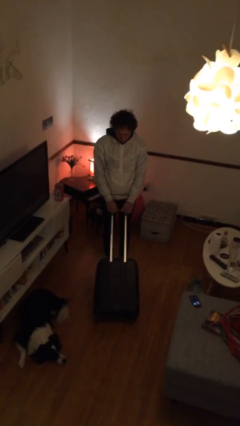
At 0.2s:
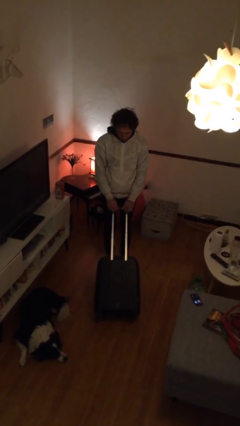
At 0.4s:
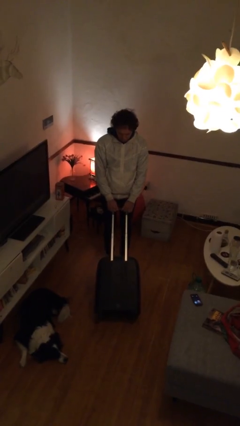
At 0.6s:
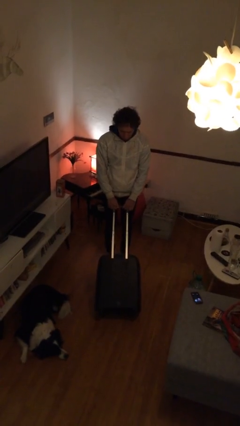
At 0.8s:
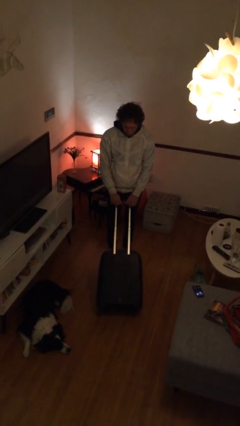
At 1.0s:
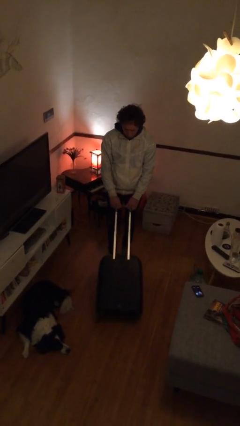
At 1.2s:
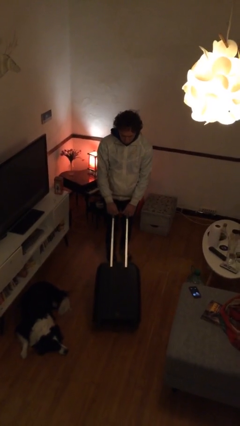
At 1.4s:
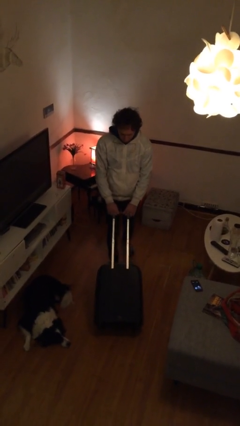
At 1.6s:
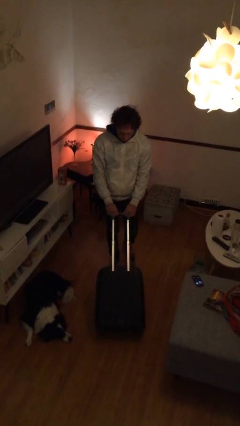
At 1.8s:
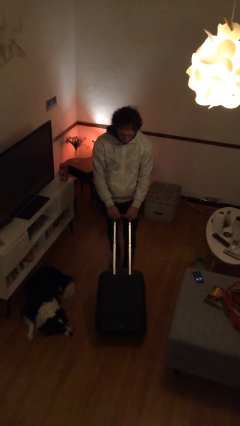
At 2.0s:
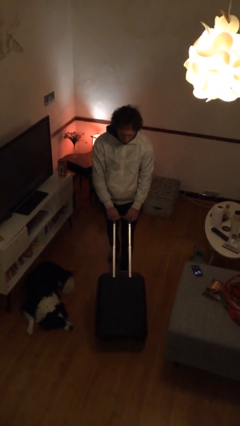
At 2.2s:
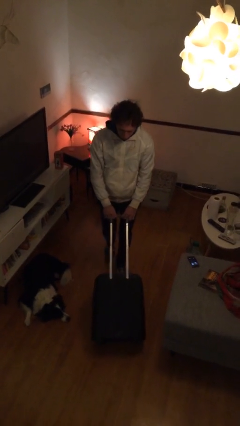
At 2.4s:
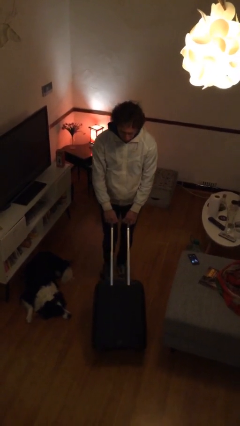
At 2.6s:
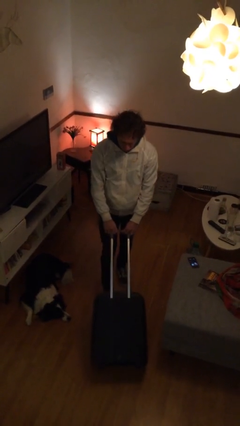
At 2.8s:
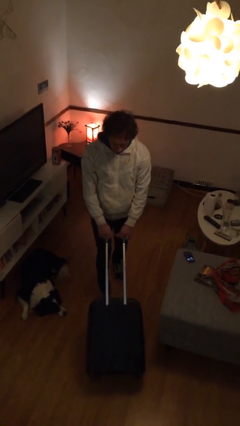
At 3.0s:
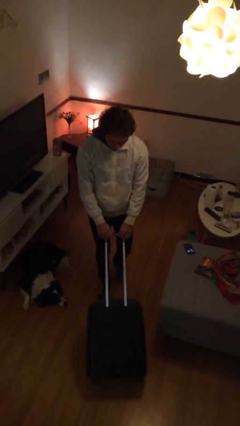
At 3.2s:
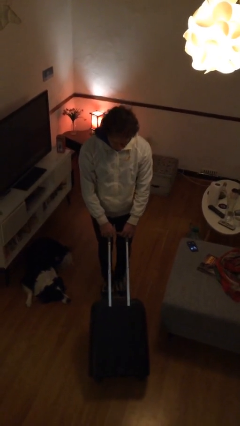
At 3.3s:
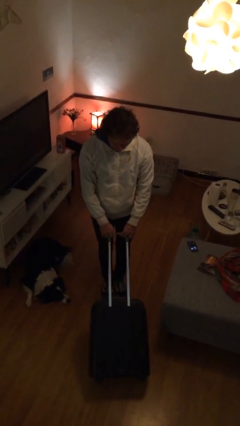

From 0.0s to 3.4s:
person pushes wheeled cart

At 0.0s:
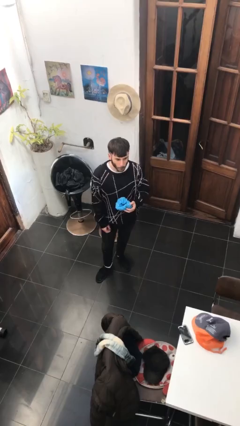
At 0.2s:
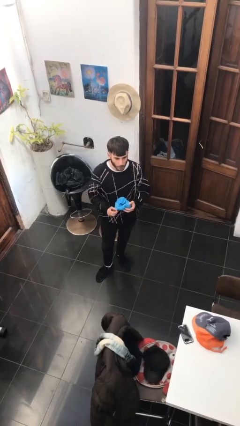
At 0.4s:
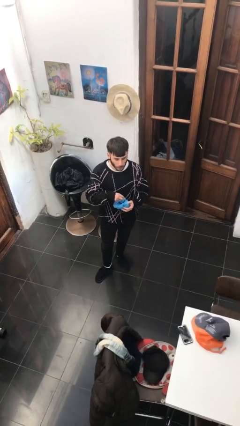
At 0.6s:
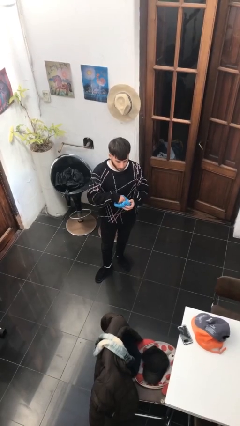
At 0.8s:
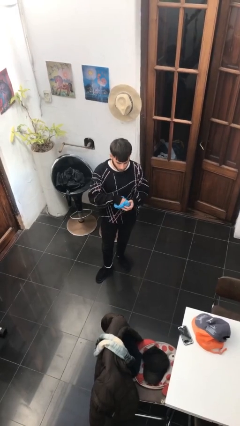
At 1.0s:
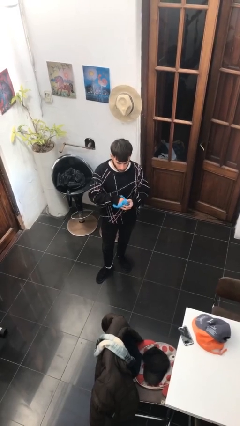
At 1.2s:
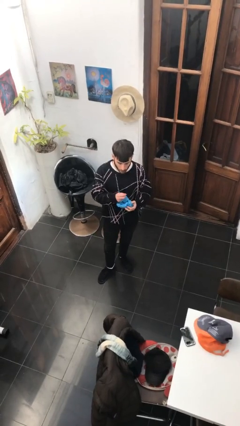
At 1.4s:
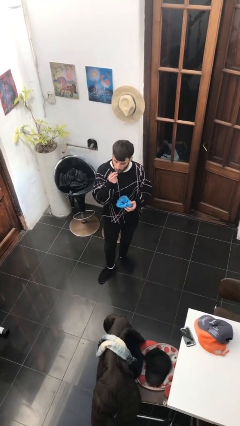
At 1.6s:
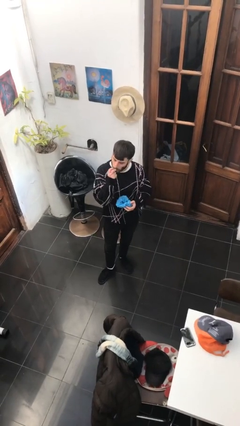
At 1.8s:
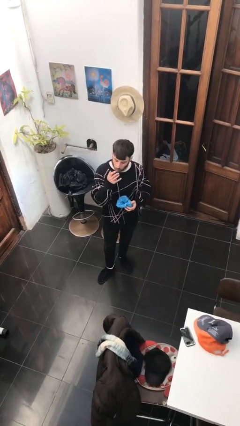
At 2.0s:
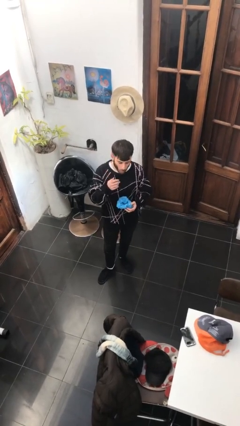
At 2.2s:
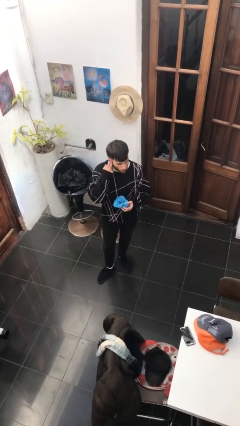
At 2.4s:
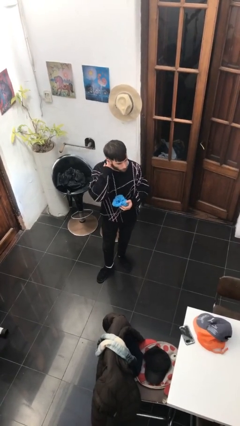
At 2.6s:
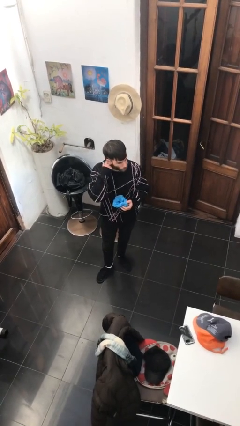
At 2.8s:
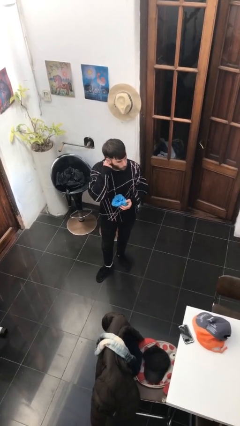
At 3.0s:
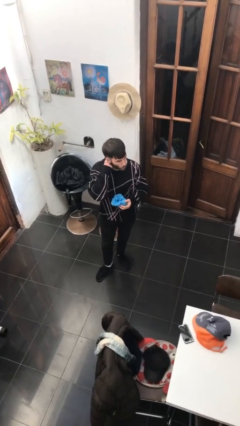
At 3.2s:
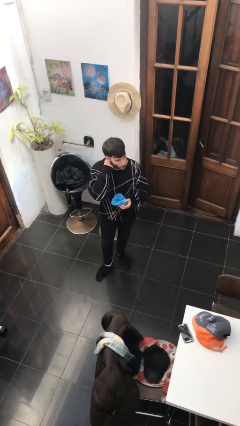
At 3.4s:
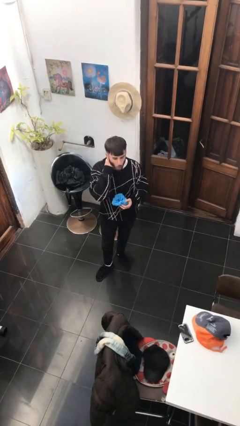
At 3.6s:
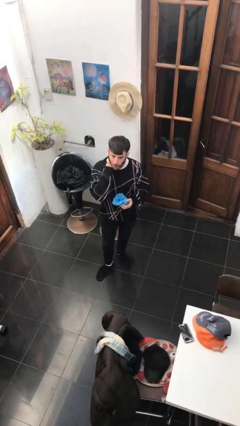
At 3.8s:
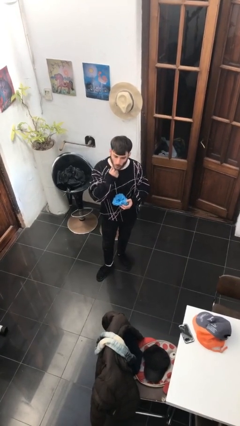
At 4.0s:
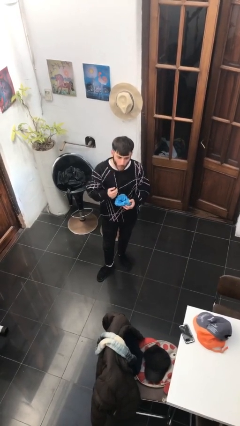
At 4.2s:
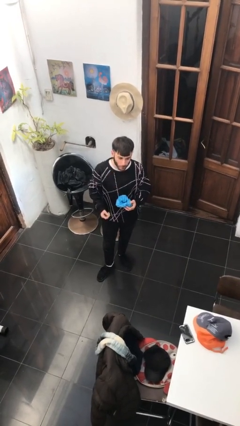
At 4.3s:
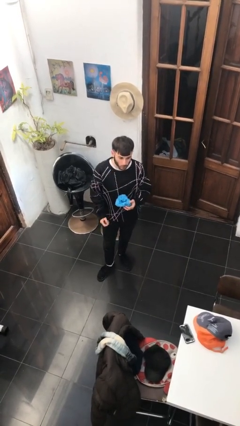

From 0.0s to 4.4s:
person eats snack from bag

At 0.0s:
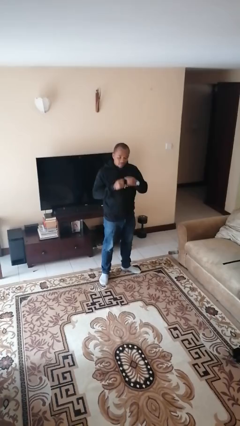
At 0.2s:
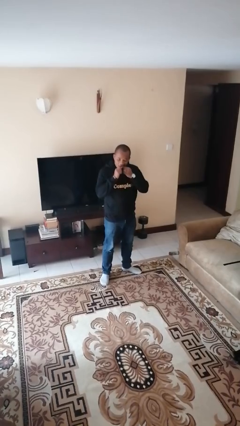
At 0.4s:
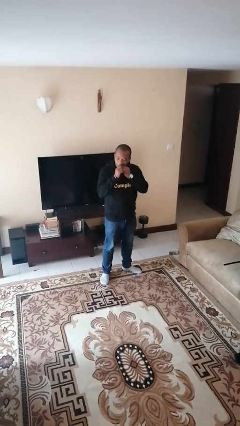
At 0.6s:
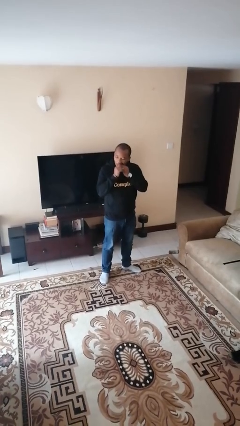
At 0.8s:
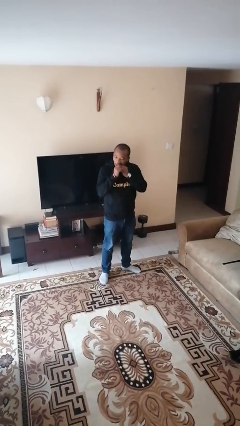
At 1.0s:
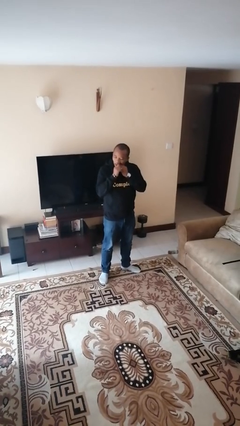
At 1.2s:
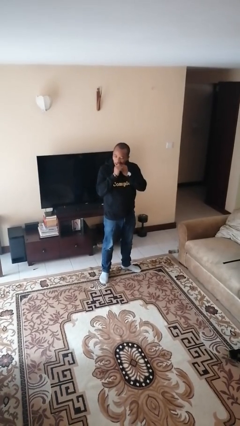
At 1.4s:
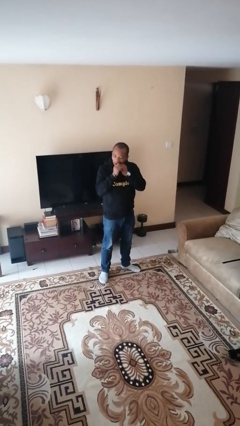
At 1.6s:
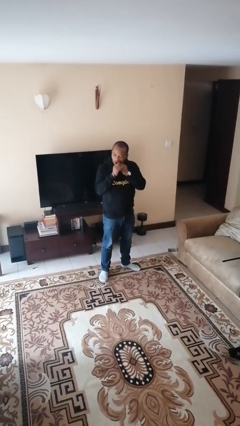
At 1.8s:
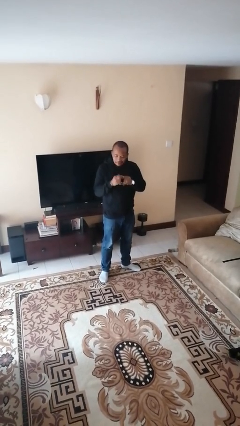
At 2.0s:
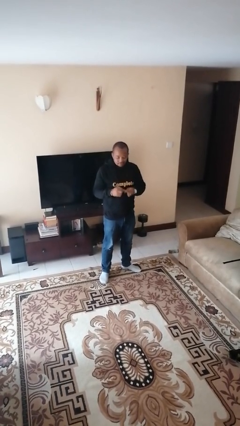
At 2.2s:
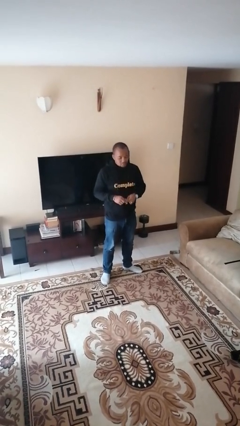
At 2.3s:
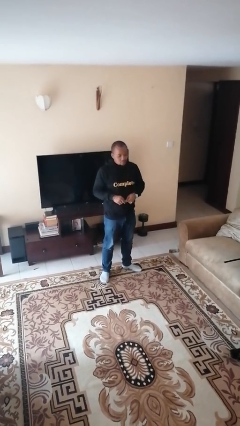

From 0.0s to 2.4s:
person flosses

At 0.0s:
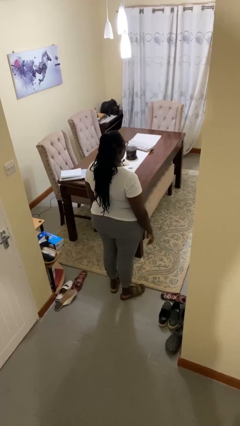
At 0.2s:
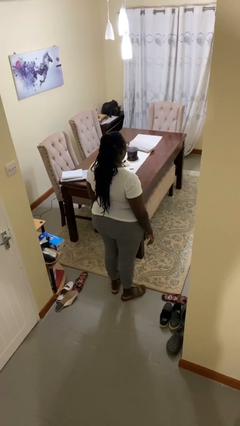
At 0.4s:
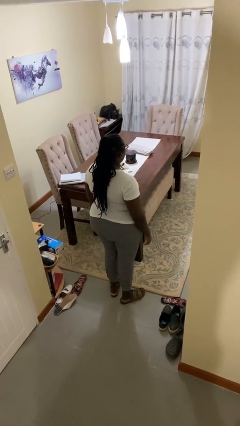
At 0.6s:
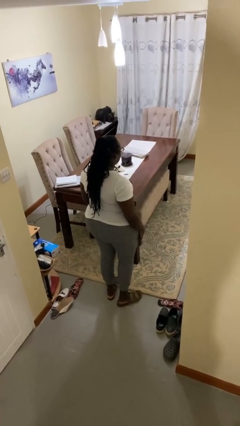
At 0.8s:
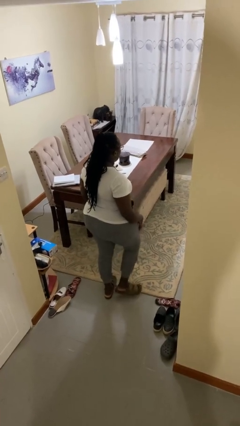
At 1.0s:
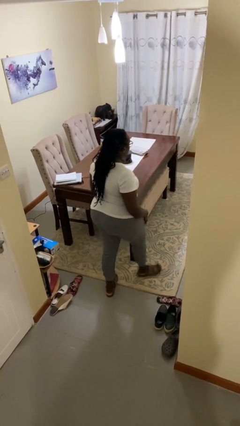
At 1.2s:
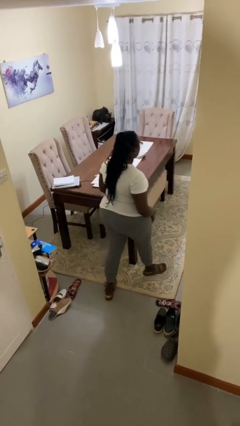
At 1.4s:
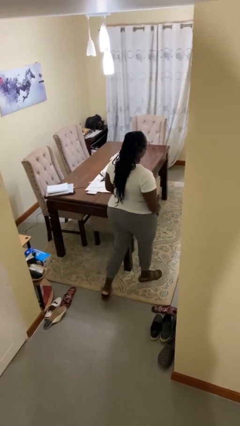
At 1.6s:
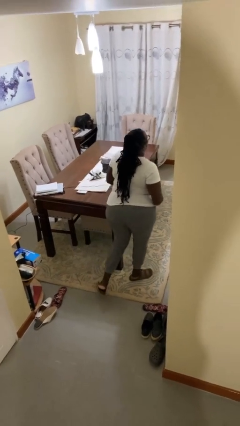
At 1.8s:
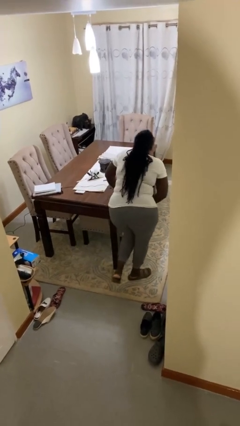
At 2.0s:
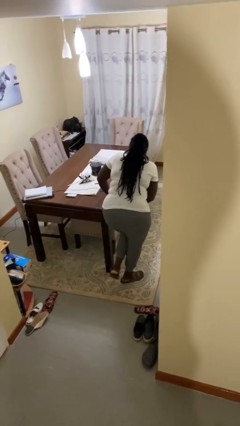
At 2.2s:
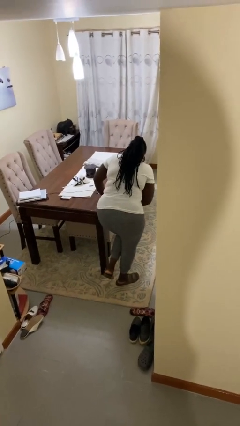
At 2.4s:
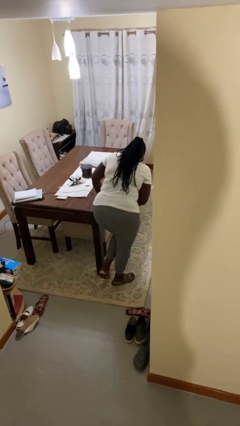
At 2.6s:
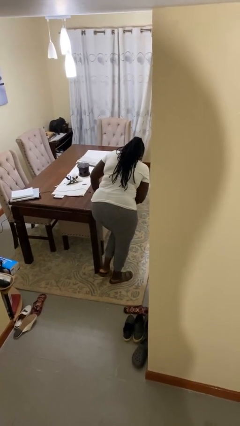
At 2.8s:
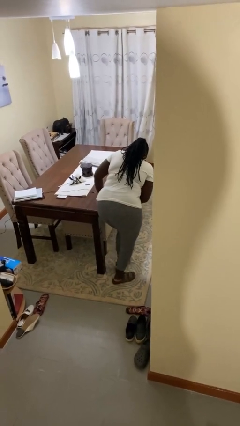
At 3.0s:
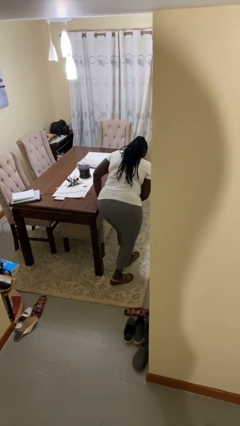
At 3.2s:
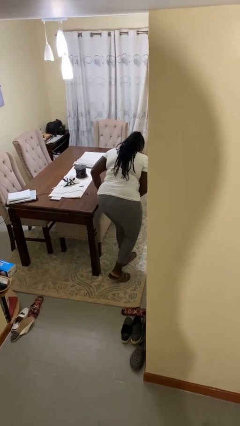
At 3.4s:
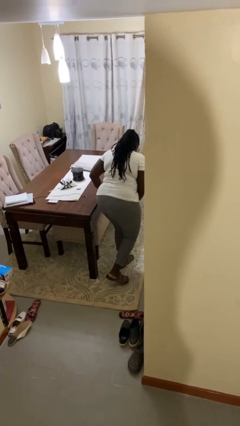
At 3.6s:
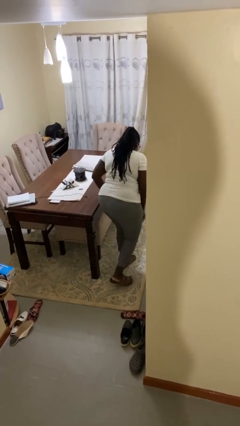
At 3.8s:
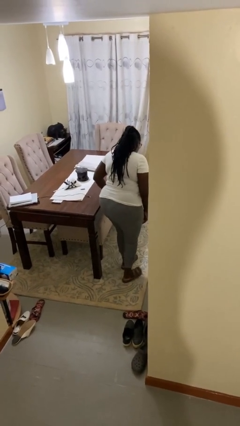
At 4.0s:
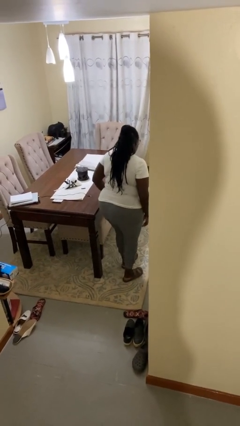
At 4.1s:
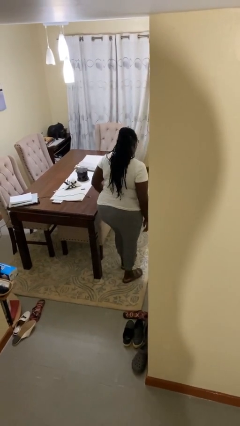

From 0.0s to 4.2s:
person bumps into table

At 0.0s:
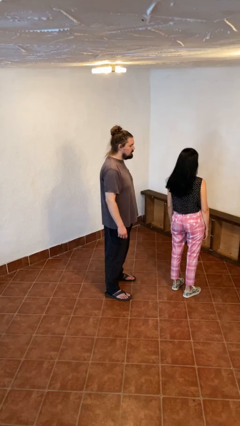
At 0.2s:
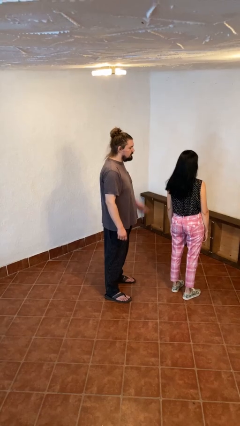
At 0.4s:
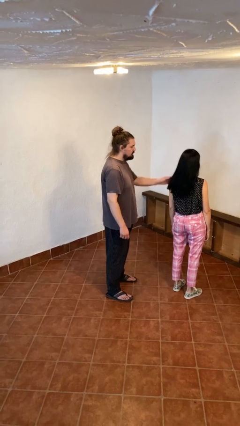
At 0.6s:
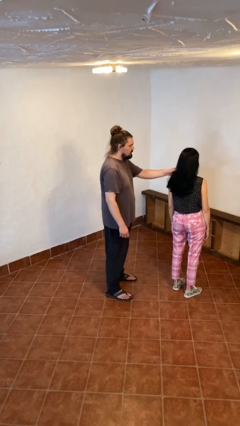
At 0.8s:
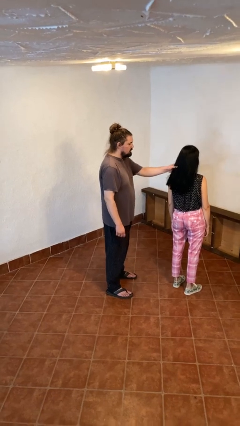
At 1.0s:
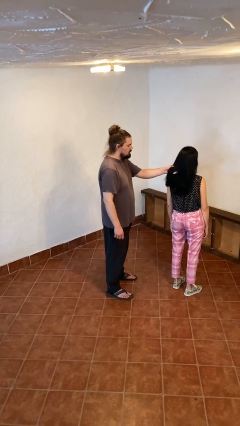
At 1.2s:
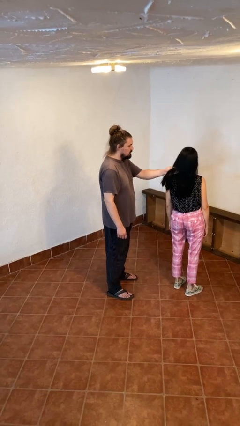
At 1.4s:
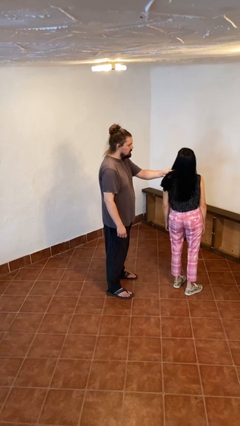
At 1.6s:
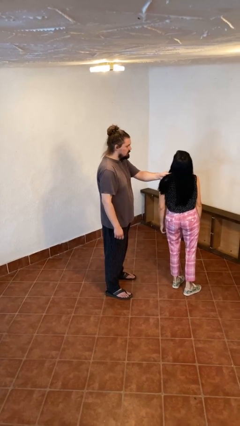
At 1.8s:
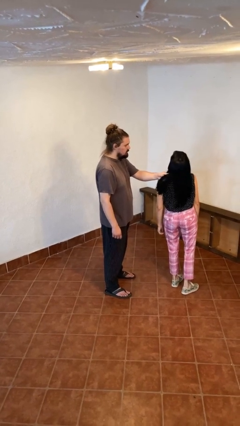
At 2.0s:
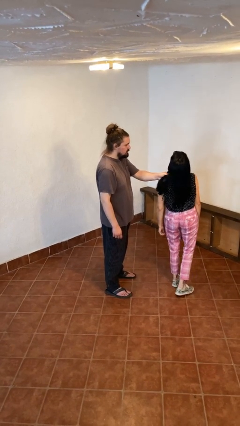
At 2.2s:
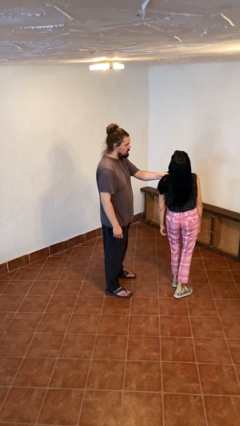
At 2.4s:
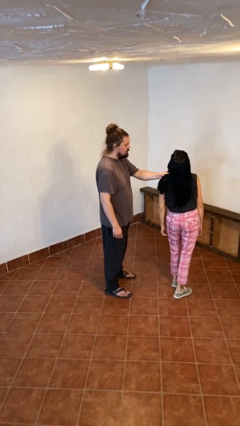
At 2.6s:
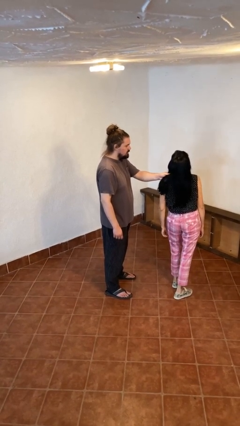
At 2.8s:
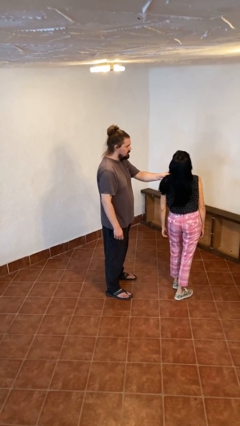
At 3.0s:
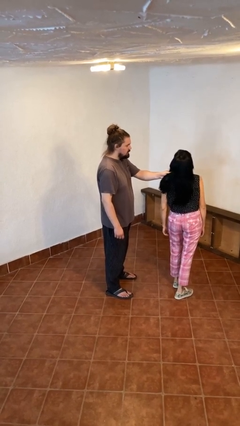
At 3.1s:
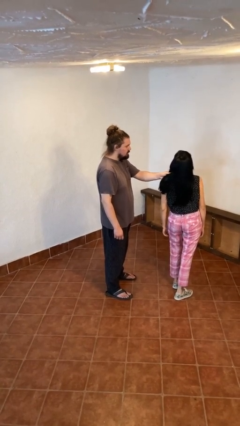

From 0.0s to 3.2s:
person grabs person by hair

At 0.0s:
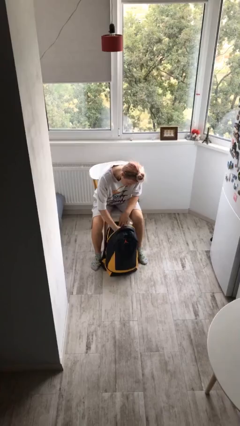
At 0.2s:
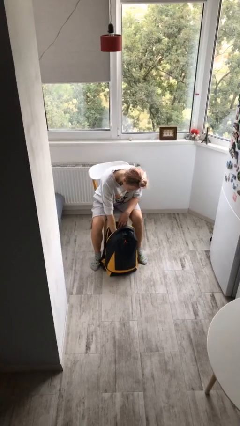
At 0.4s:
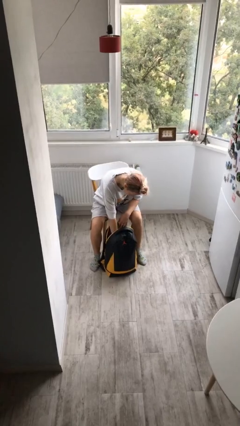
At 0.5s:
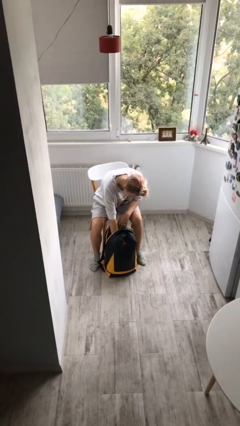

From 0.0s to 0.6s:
person puts object into backpack
